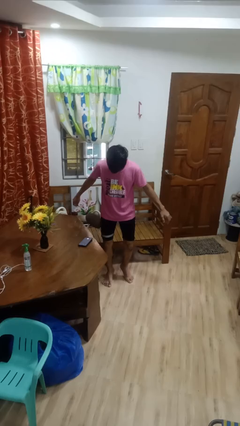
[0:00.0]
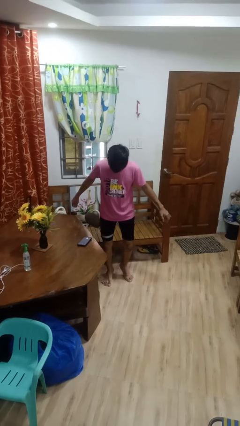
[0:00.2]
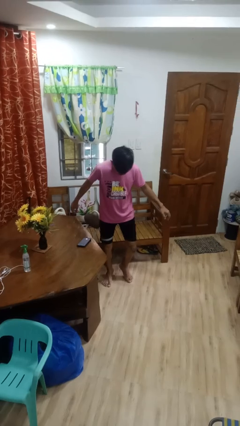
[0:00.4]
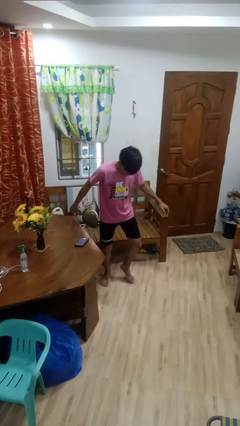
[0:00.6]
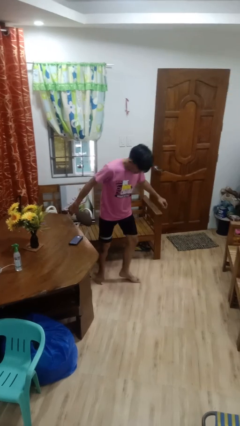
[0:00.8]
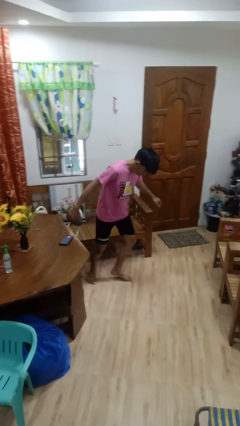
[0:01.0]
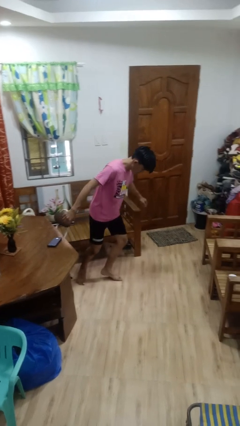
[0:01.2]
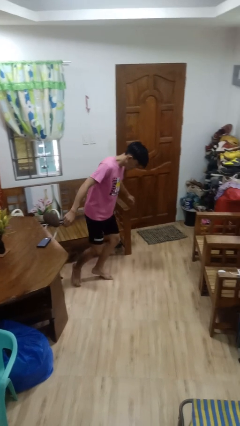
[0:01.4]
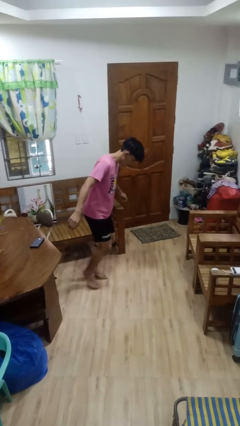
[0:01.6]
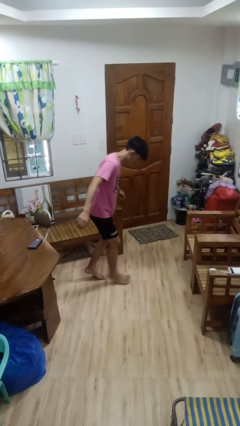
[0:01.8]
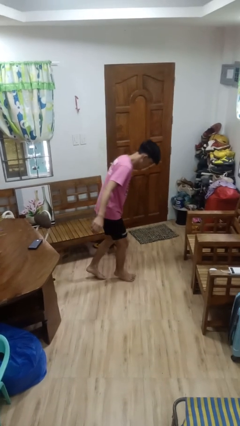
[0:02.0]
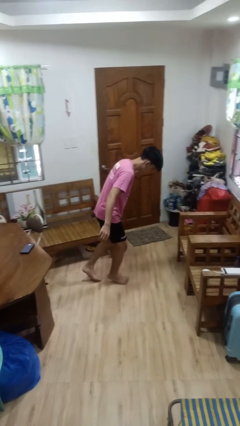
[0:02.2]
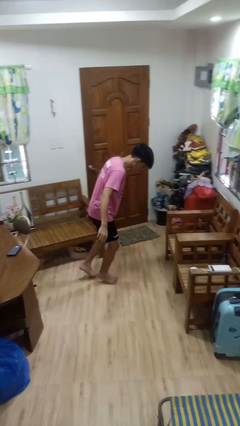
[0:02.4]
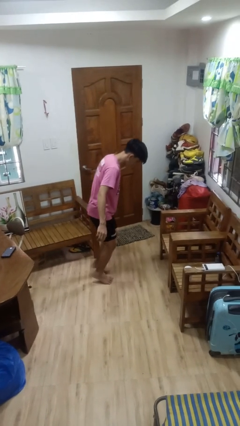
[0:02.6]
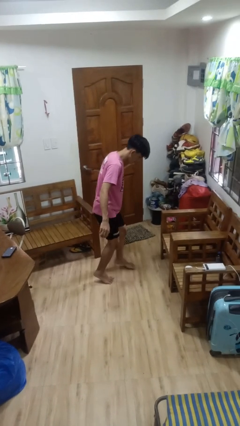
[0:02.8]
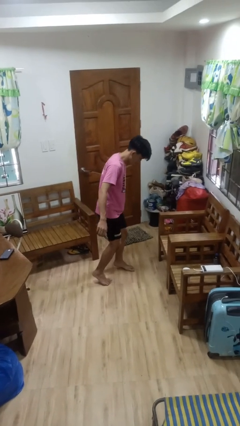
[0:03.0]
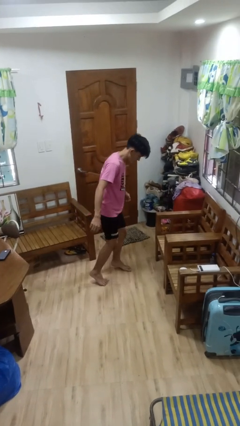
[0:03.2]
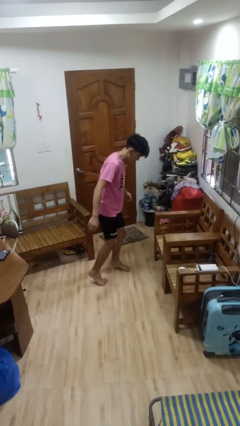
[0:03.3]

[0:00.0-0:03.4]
person walks tiptoe

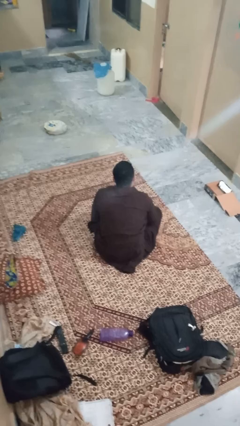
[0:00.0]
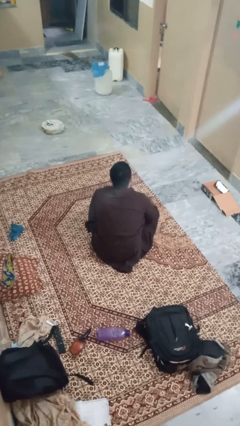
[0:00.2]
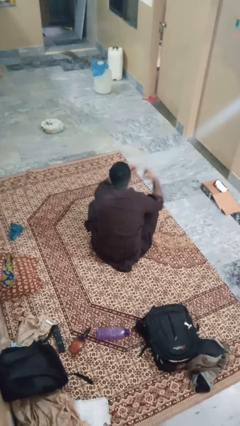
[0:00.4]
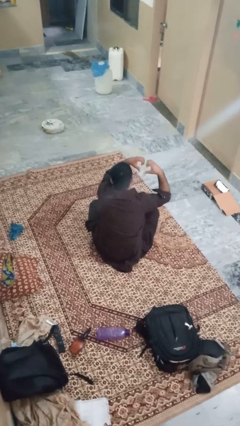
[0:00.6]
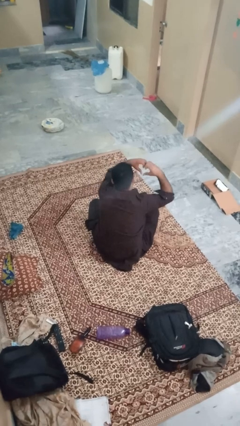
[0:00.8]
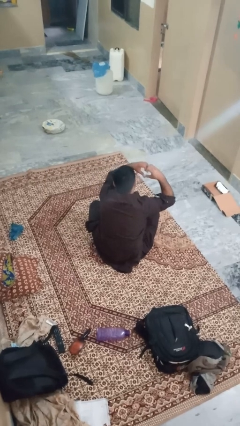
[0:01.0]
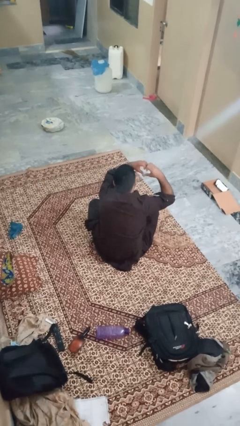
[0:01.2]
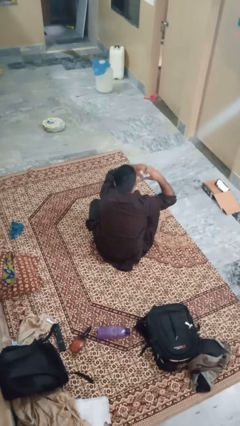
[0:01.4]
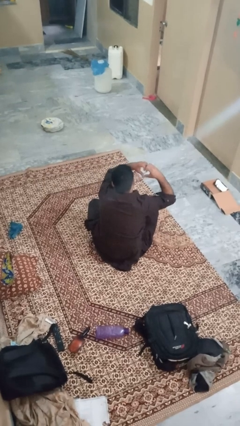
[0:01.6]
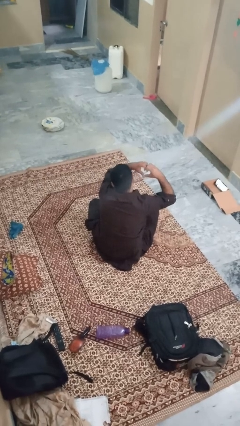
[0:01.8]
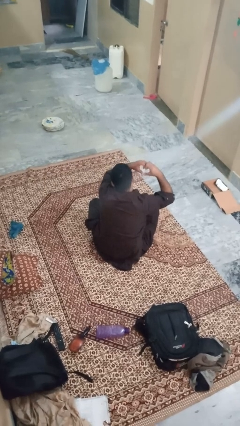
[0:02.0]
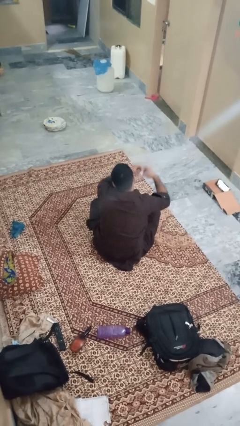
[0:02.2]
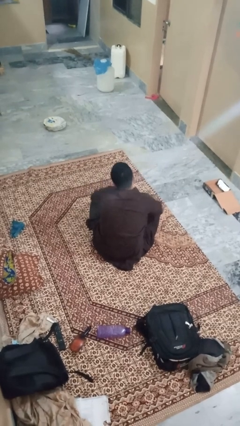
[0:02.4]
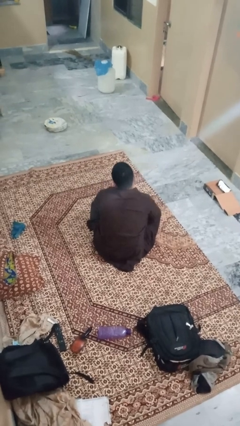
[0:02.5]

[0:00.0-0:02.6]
person gestures heart

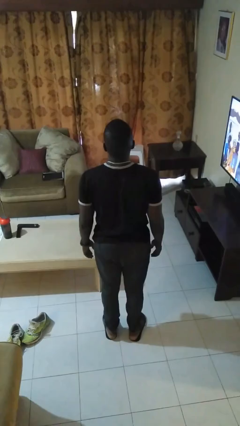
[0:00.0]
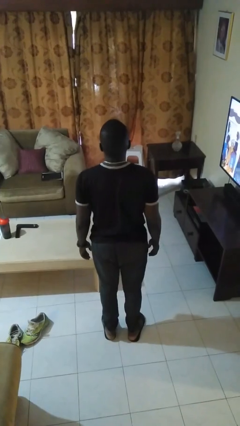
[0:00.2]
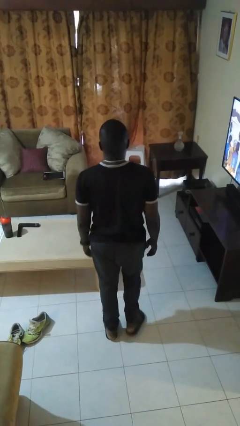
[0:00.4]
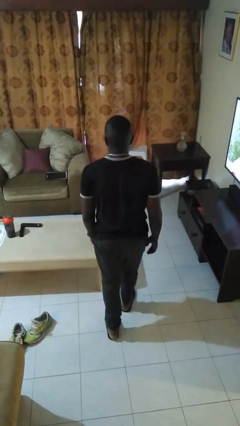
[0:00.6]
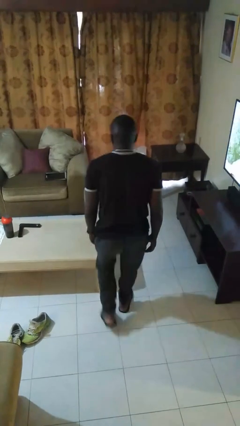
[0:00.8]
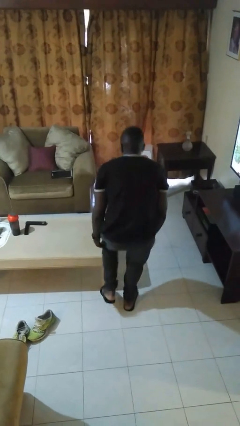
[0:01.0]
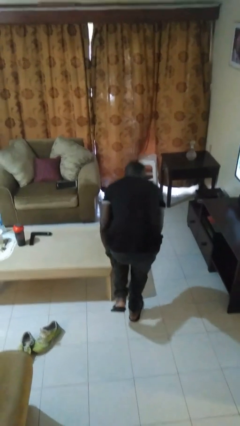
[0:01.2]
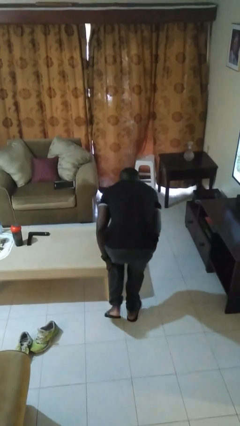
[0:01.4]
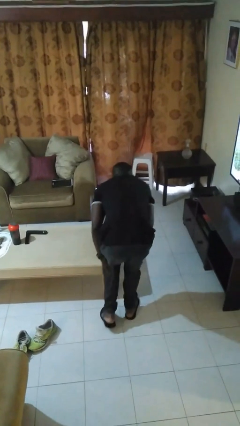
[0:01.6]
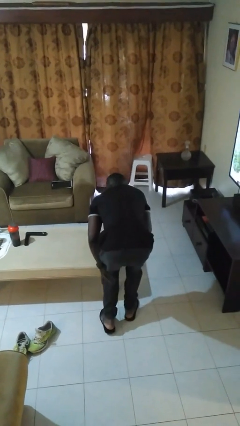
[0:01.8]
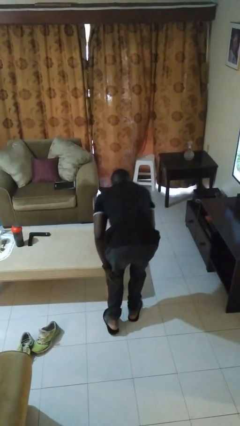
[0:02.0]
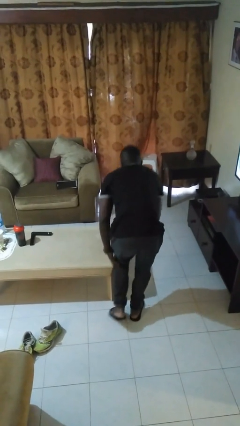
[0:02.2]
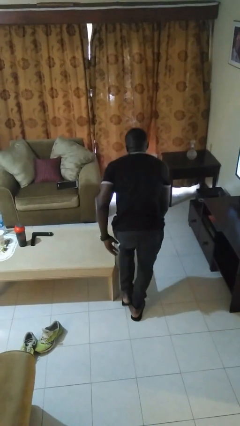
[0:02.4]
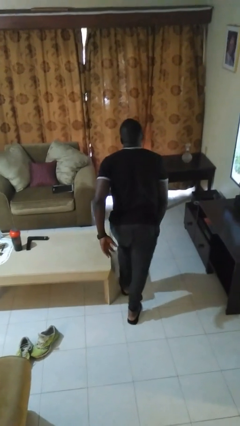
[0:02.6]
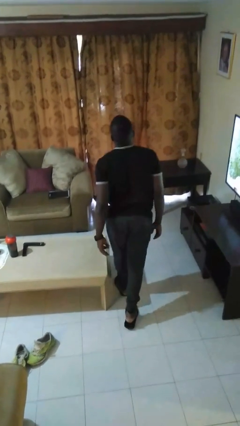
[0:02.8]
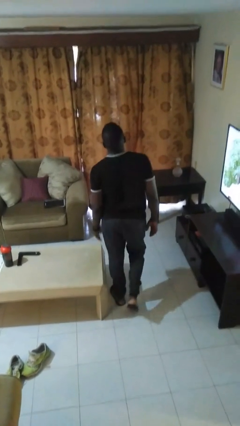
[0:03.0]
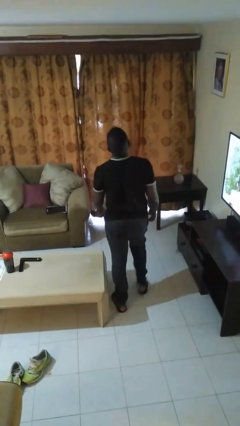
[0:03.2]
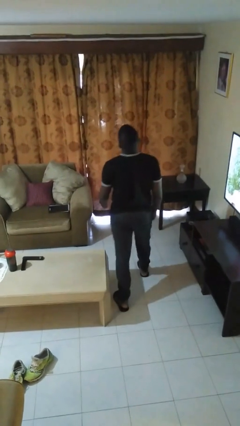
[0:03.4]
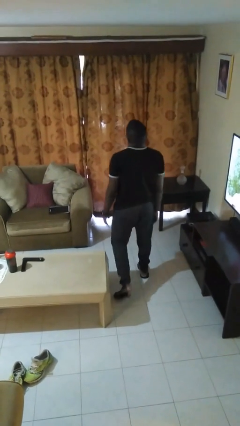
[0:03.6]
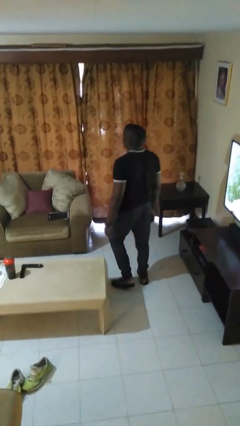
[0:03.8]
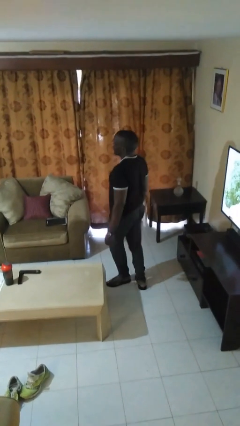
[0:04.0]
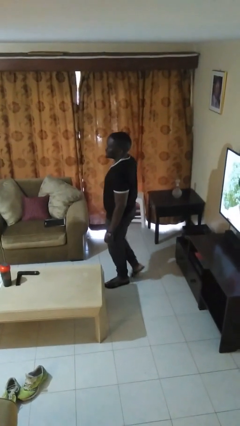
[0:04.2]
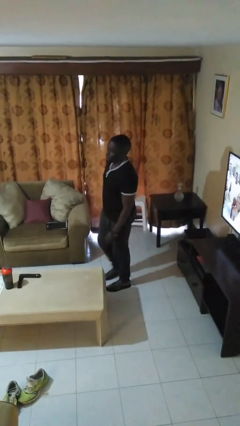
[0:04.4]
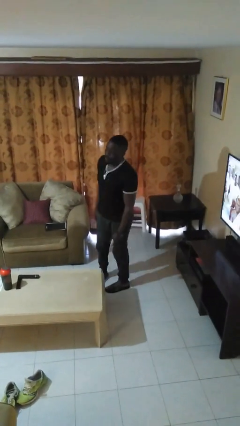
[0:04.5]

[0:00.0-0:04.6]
person bumps into table

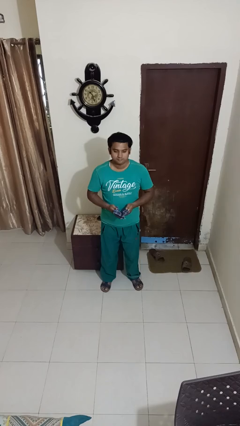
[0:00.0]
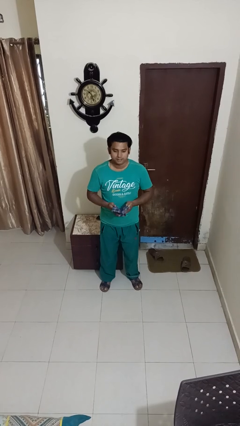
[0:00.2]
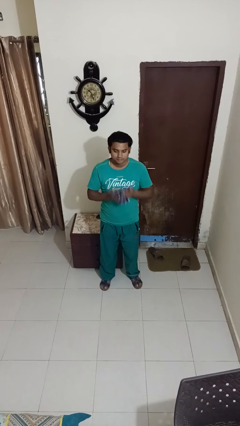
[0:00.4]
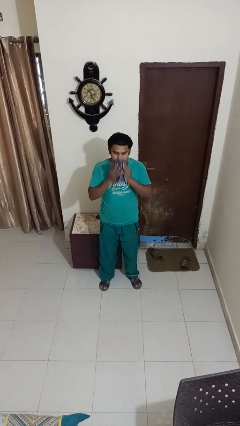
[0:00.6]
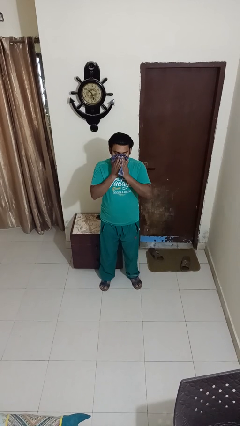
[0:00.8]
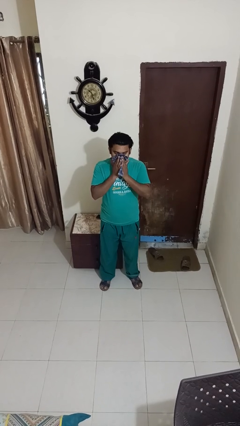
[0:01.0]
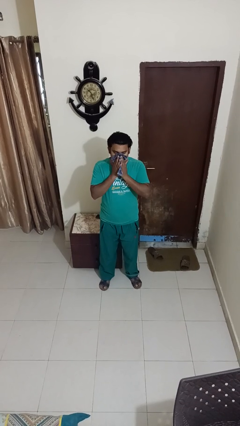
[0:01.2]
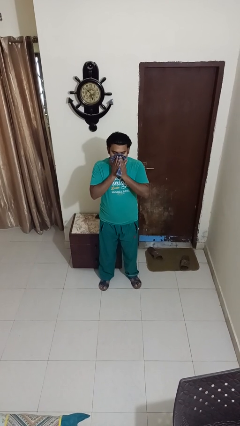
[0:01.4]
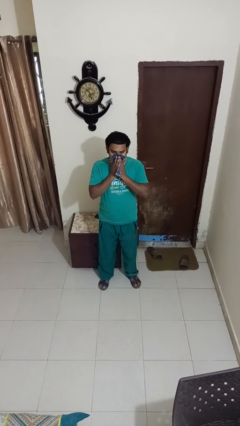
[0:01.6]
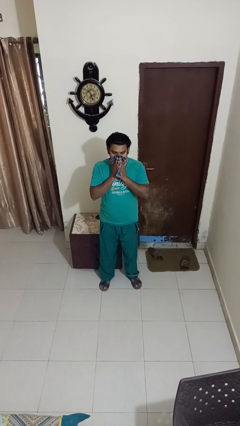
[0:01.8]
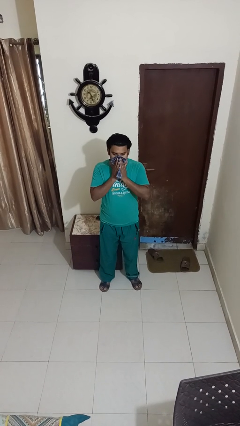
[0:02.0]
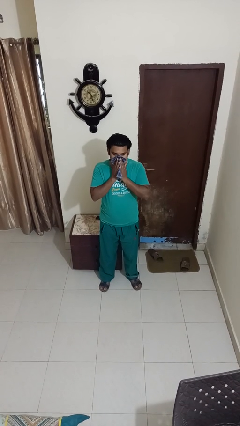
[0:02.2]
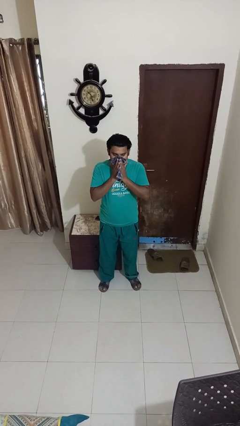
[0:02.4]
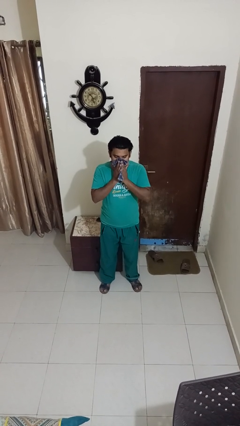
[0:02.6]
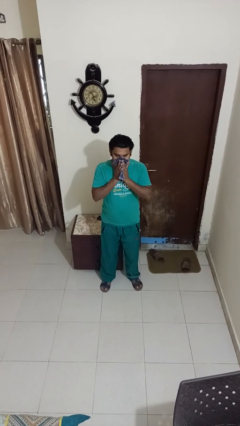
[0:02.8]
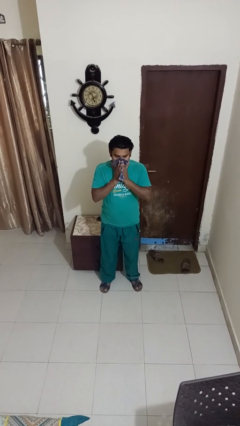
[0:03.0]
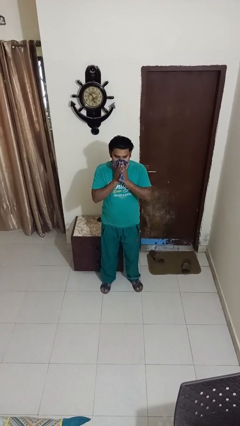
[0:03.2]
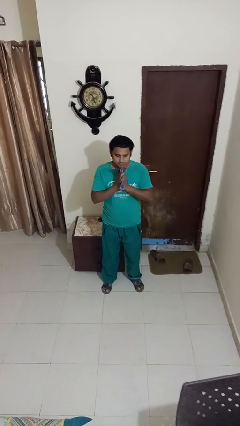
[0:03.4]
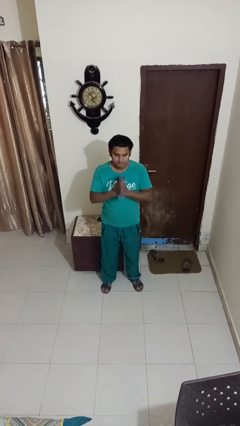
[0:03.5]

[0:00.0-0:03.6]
person blows nose

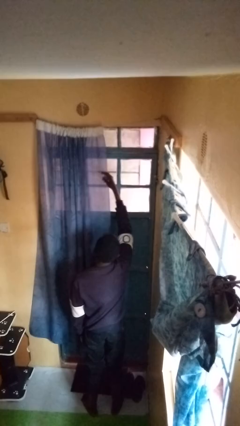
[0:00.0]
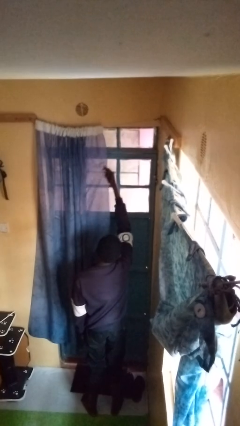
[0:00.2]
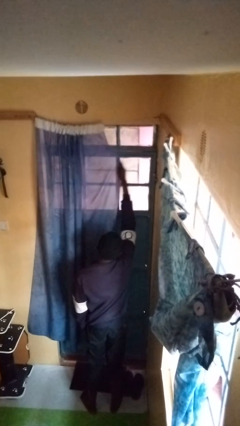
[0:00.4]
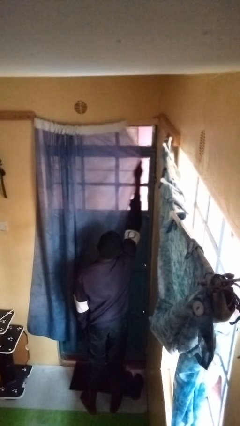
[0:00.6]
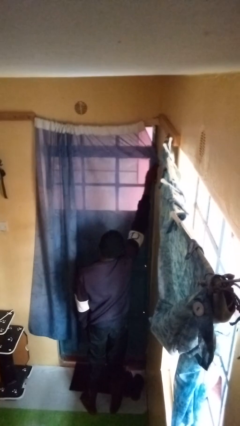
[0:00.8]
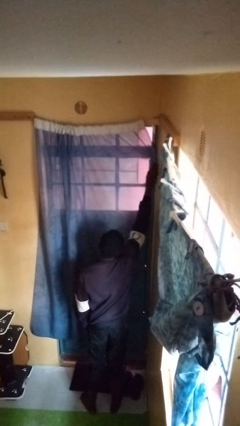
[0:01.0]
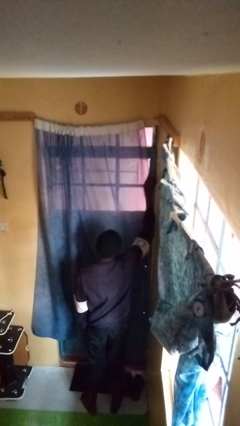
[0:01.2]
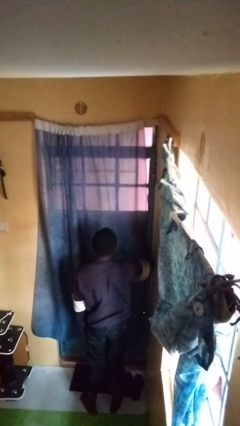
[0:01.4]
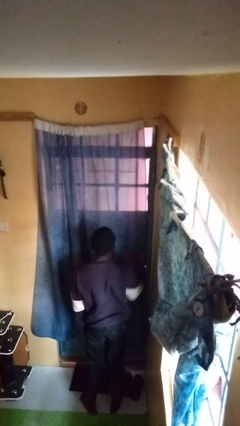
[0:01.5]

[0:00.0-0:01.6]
person closes curtains

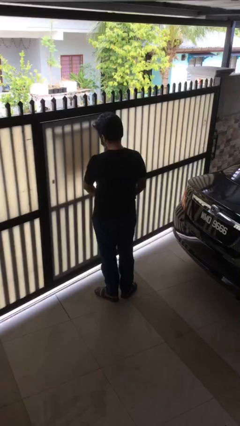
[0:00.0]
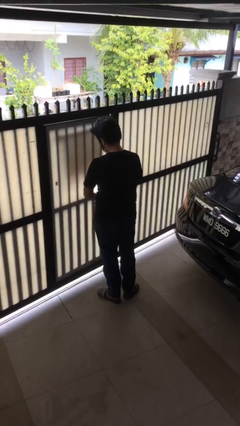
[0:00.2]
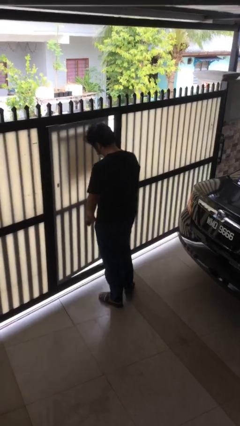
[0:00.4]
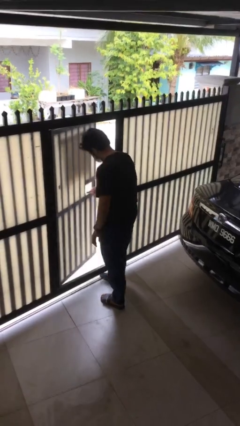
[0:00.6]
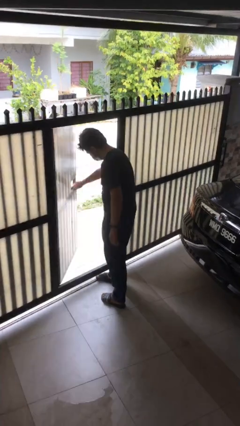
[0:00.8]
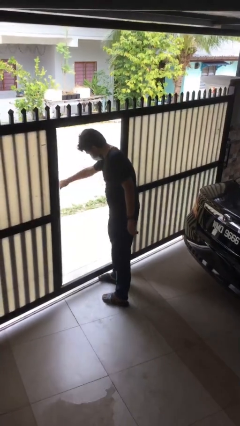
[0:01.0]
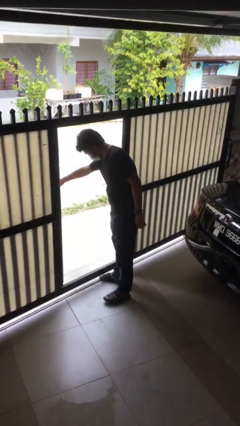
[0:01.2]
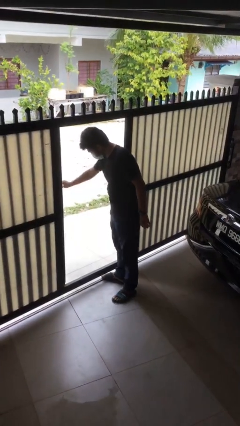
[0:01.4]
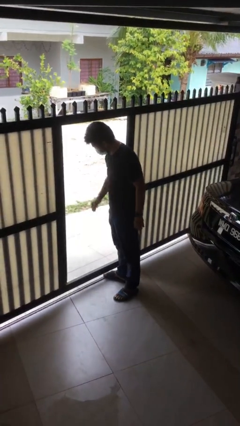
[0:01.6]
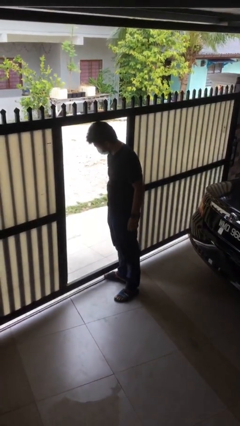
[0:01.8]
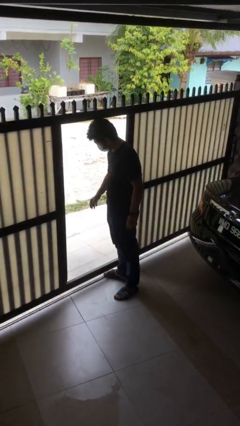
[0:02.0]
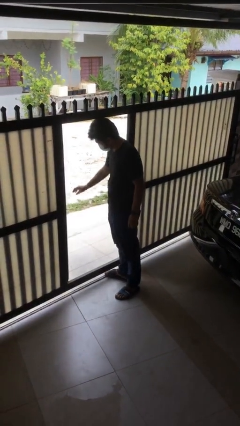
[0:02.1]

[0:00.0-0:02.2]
person opens gate
